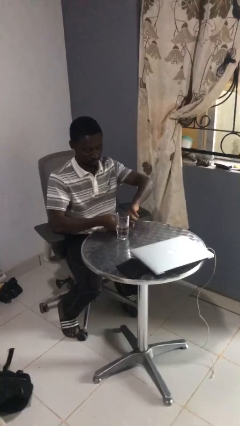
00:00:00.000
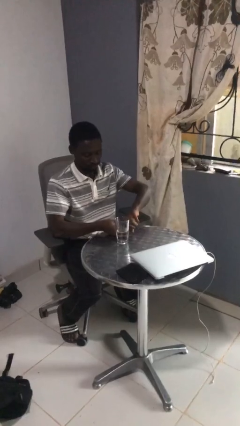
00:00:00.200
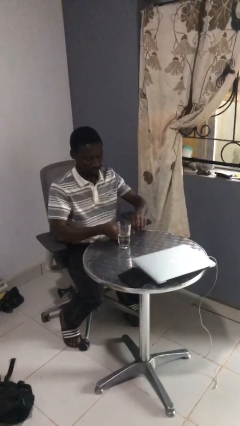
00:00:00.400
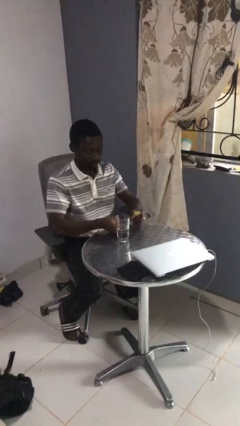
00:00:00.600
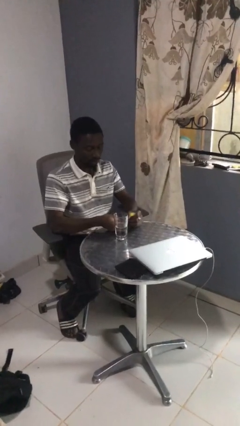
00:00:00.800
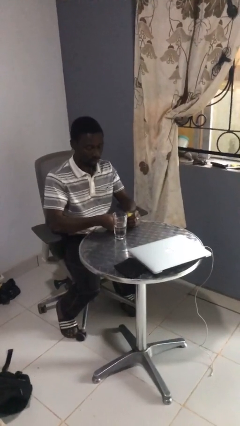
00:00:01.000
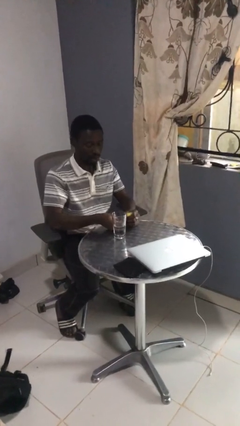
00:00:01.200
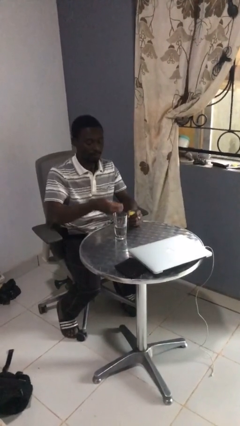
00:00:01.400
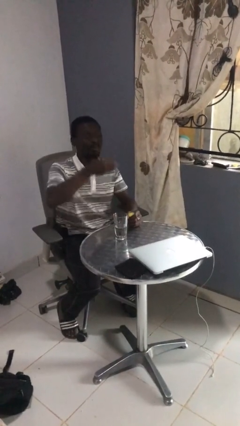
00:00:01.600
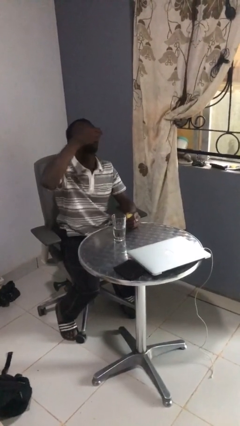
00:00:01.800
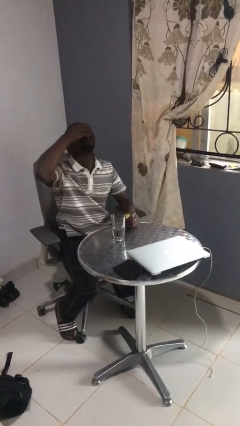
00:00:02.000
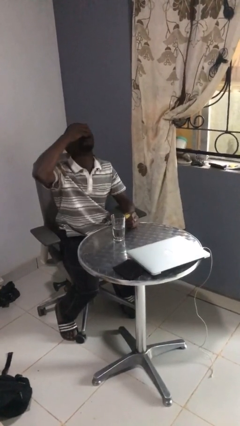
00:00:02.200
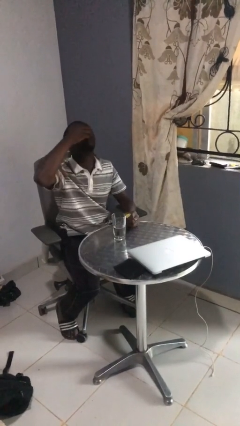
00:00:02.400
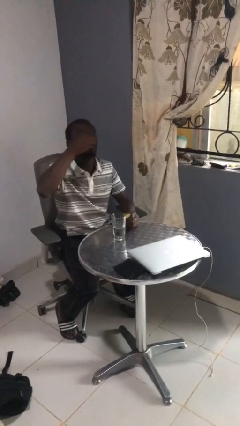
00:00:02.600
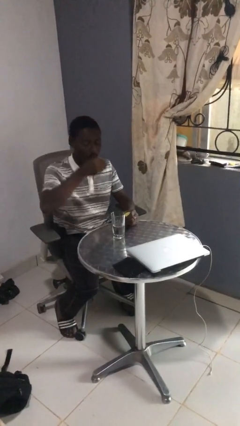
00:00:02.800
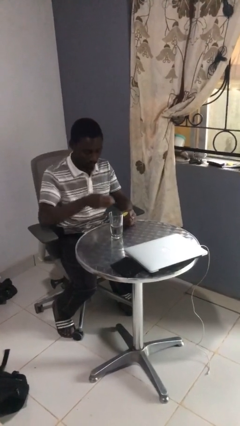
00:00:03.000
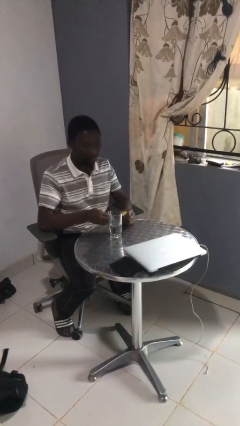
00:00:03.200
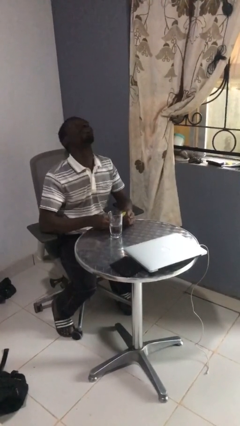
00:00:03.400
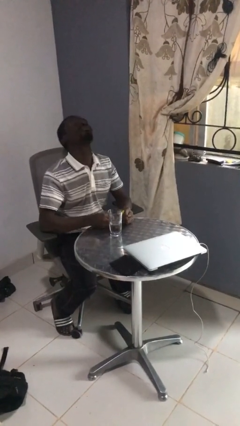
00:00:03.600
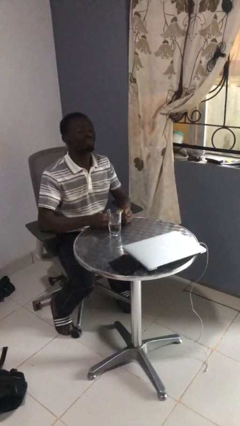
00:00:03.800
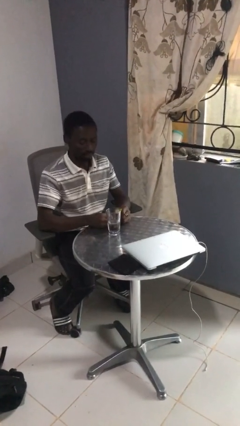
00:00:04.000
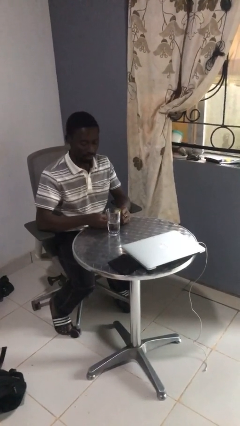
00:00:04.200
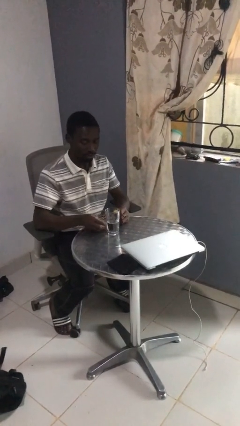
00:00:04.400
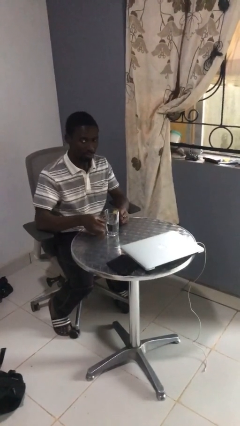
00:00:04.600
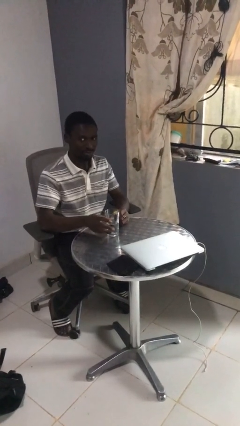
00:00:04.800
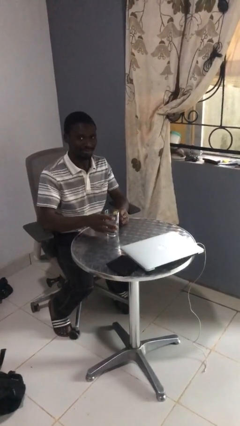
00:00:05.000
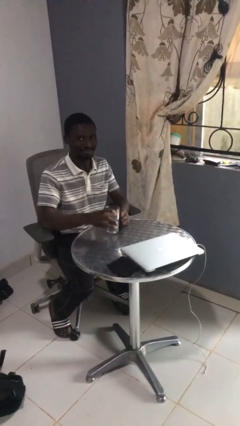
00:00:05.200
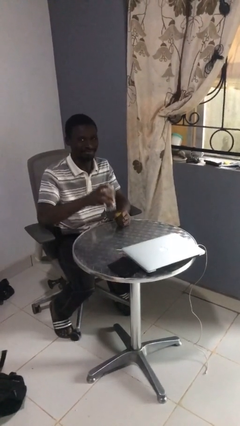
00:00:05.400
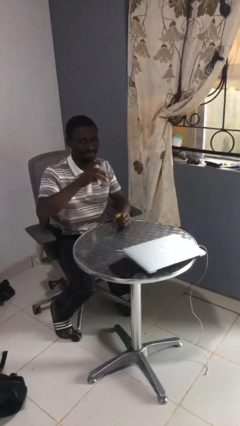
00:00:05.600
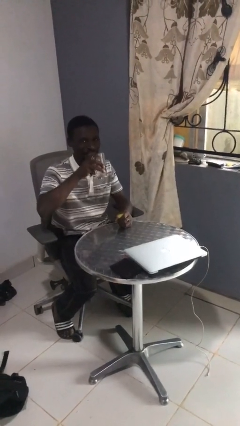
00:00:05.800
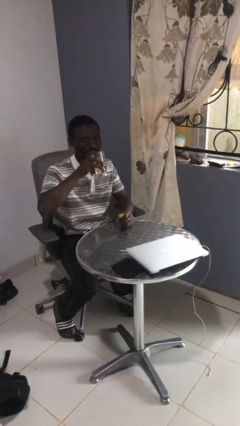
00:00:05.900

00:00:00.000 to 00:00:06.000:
person takes medicine pills

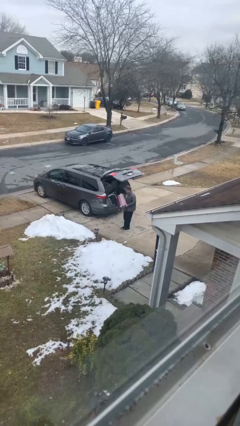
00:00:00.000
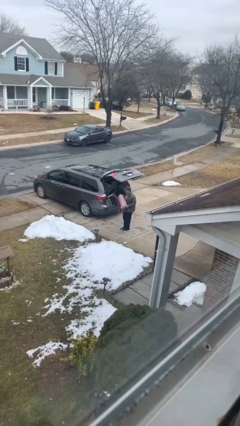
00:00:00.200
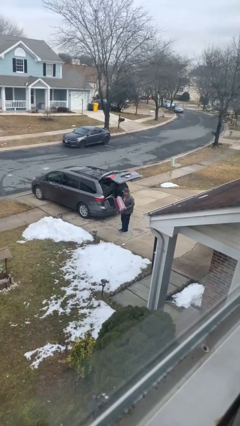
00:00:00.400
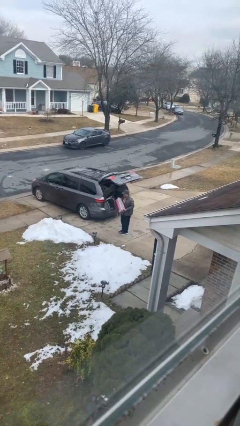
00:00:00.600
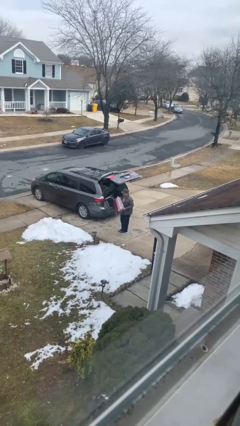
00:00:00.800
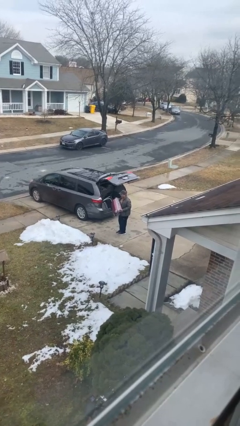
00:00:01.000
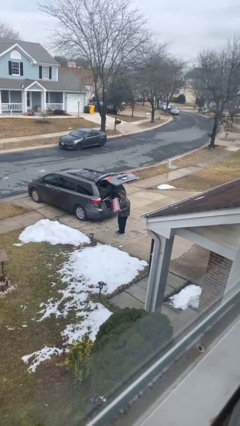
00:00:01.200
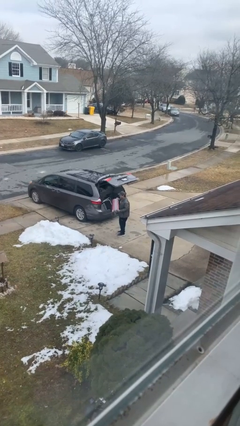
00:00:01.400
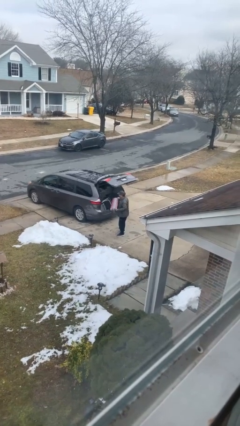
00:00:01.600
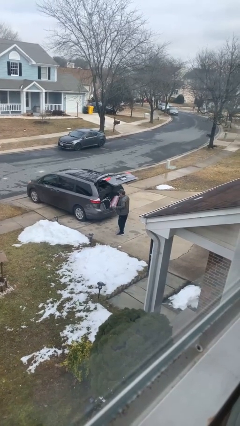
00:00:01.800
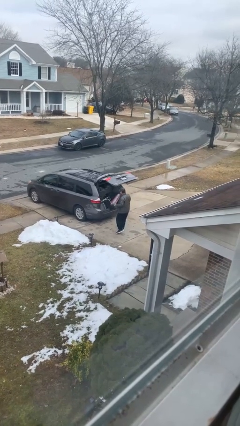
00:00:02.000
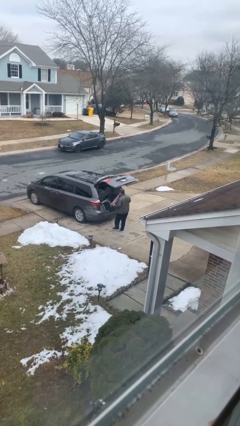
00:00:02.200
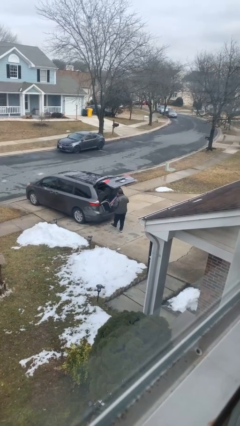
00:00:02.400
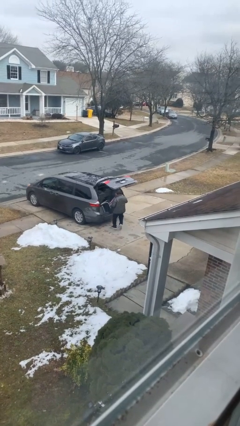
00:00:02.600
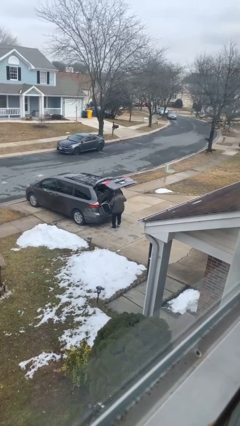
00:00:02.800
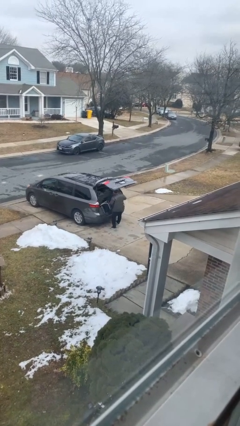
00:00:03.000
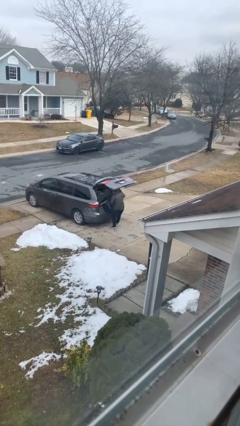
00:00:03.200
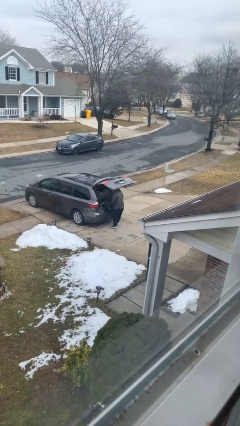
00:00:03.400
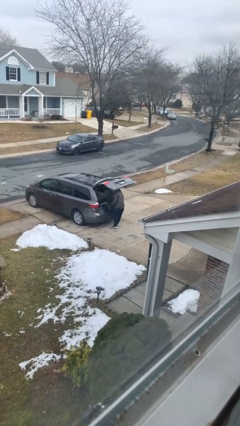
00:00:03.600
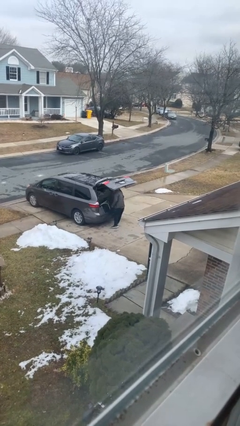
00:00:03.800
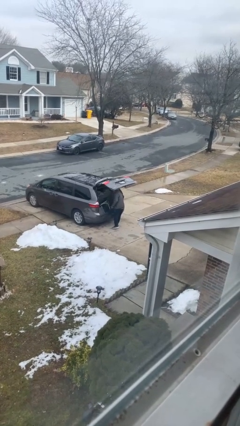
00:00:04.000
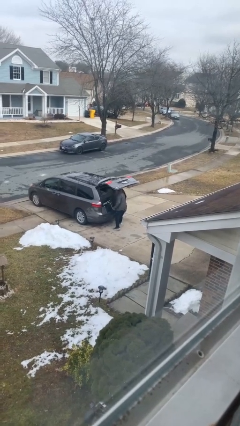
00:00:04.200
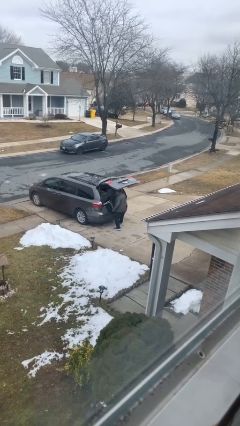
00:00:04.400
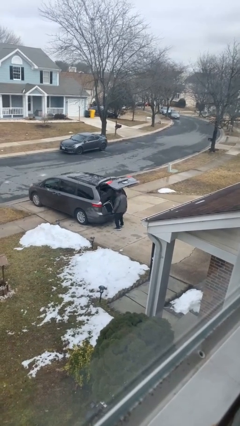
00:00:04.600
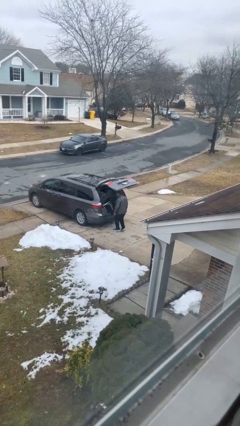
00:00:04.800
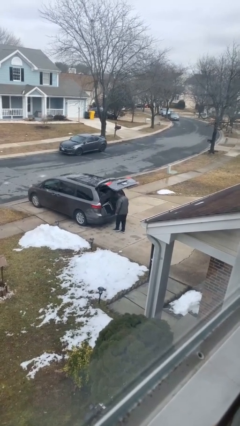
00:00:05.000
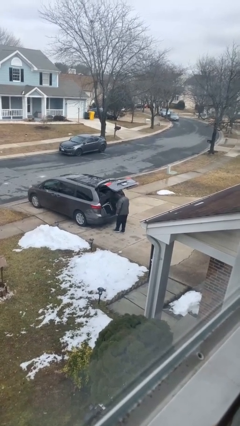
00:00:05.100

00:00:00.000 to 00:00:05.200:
person loads car

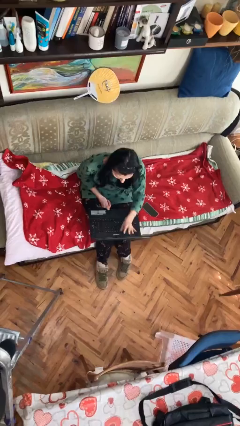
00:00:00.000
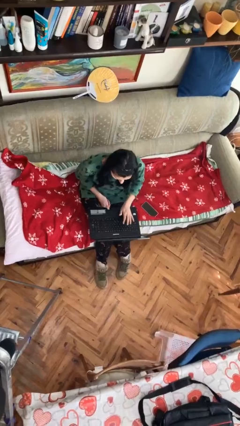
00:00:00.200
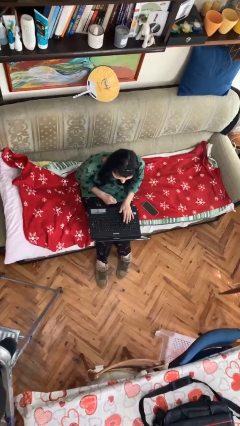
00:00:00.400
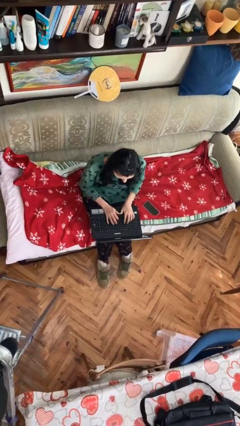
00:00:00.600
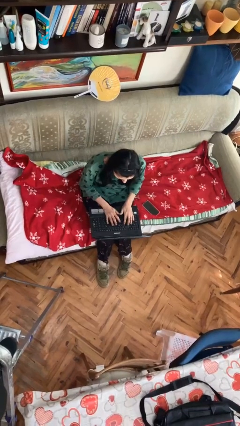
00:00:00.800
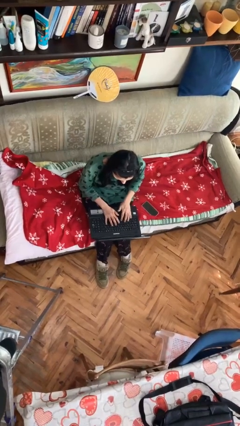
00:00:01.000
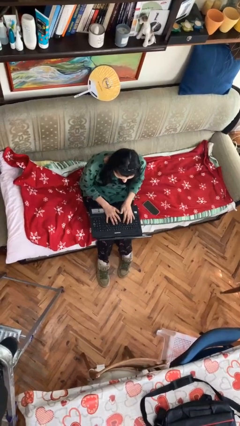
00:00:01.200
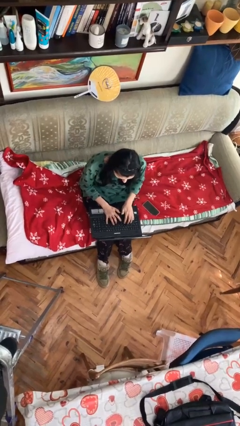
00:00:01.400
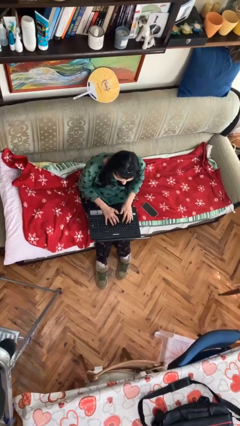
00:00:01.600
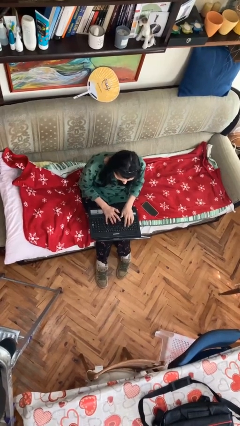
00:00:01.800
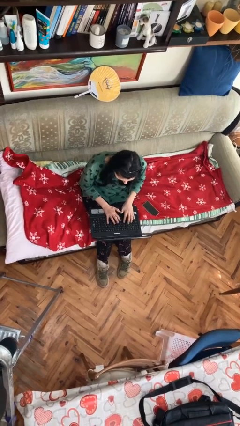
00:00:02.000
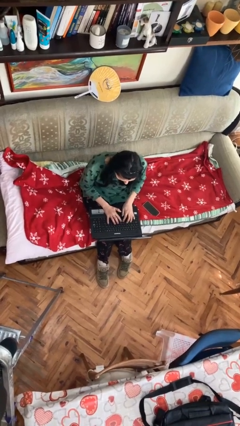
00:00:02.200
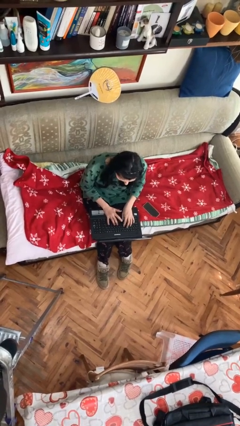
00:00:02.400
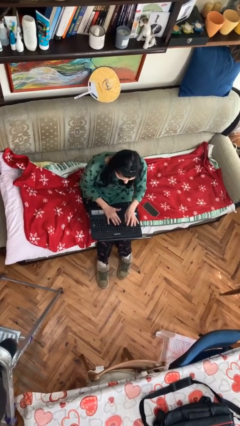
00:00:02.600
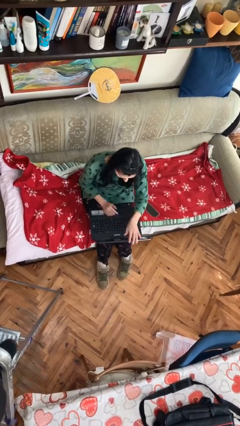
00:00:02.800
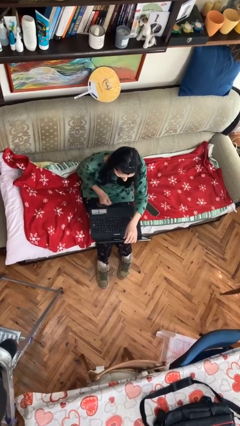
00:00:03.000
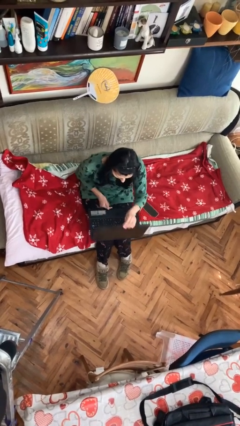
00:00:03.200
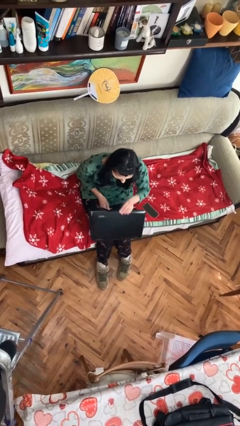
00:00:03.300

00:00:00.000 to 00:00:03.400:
person interacts with laptop

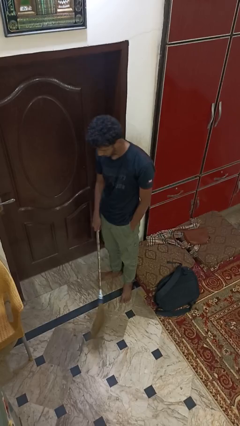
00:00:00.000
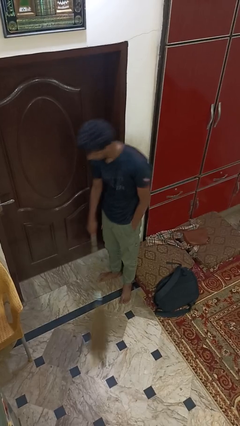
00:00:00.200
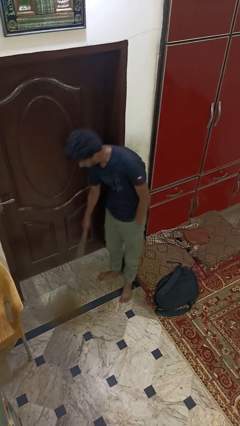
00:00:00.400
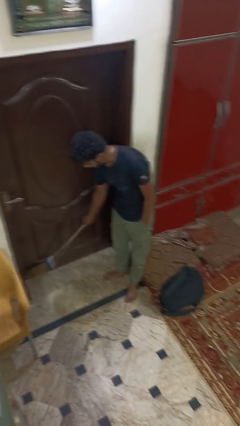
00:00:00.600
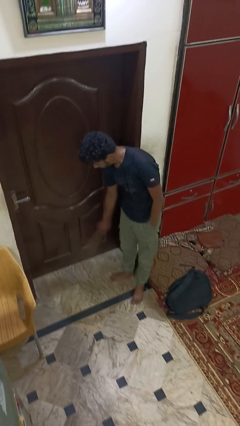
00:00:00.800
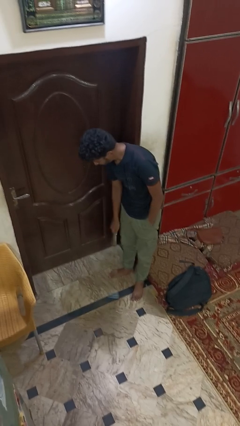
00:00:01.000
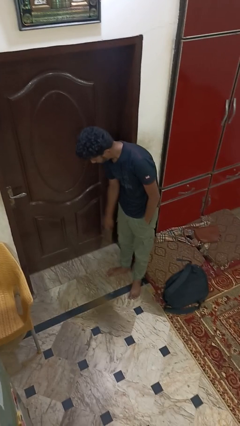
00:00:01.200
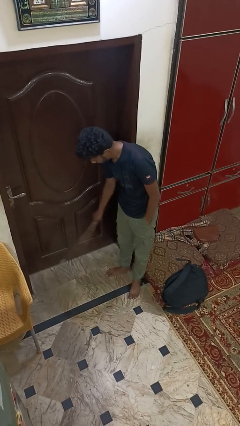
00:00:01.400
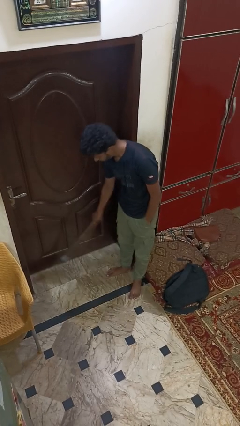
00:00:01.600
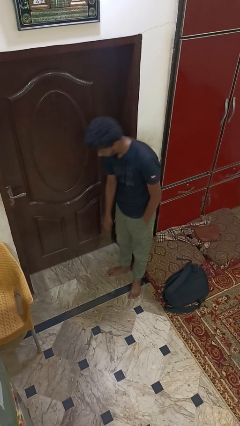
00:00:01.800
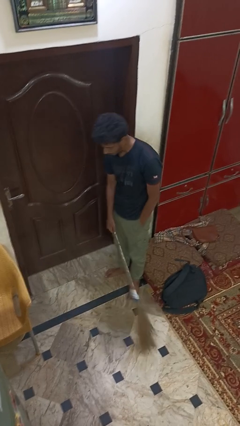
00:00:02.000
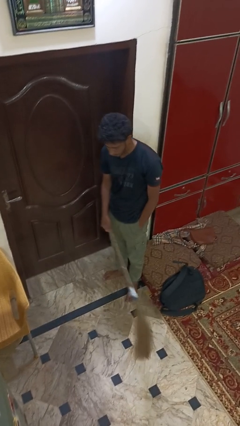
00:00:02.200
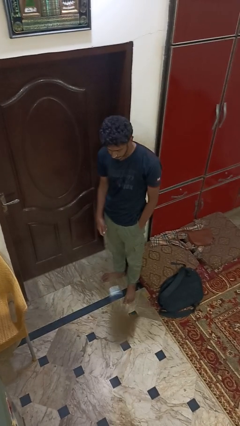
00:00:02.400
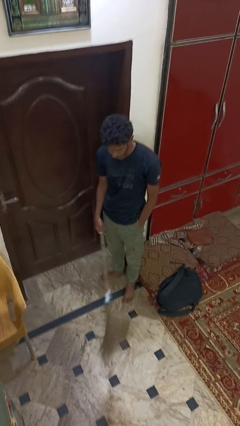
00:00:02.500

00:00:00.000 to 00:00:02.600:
person sweeps floor

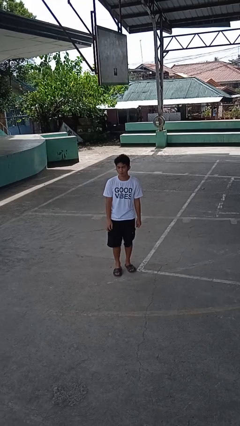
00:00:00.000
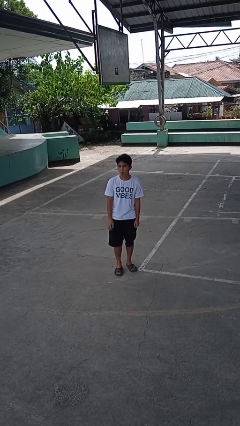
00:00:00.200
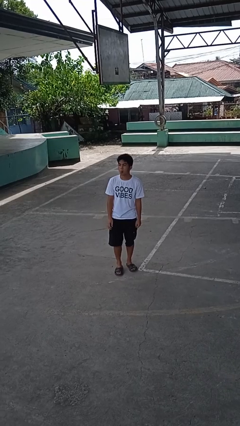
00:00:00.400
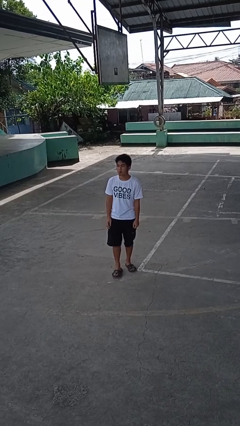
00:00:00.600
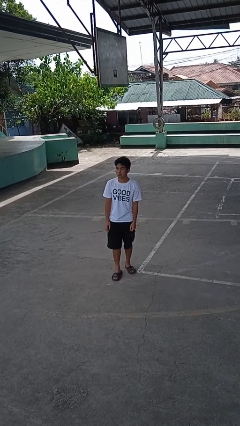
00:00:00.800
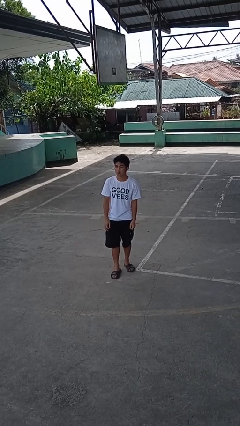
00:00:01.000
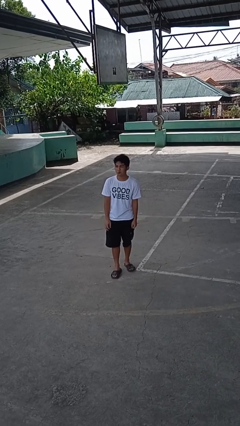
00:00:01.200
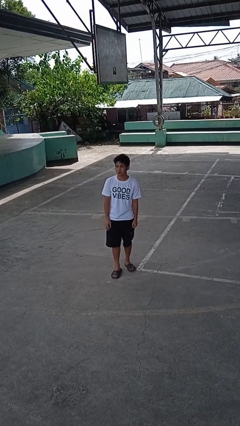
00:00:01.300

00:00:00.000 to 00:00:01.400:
person sticks out tongue
